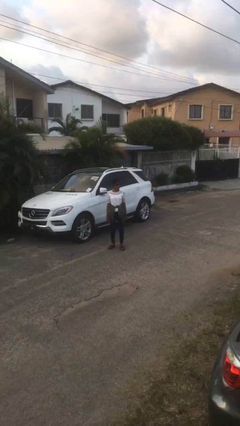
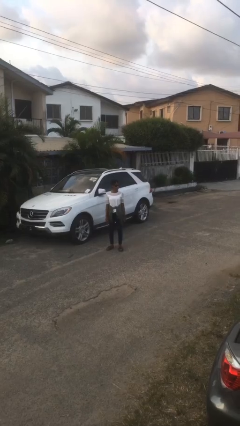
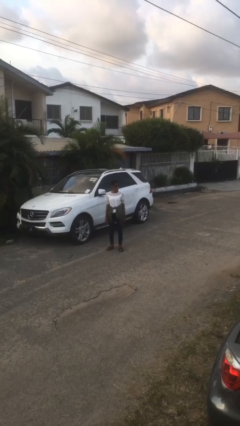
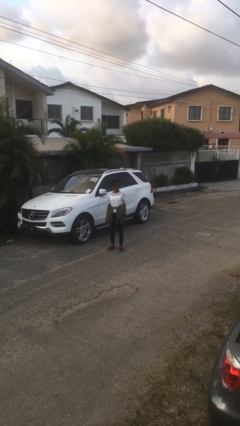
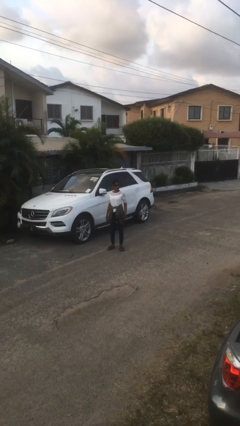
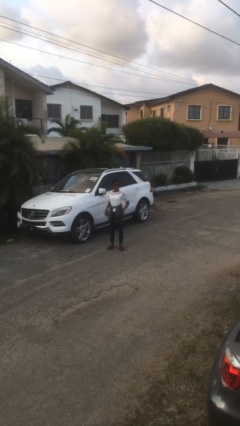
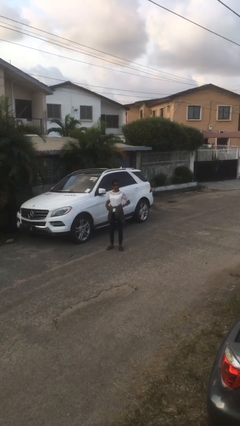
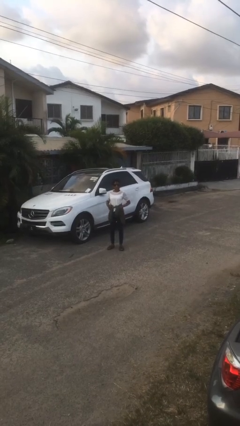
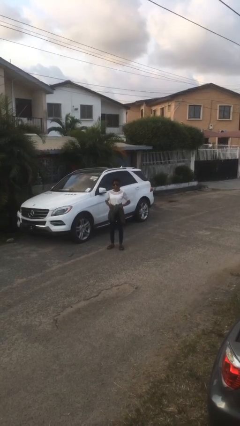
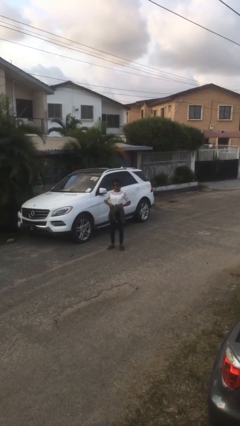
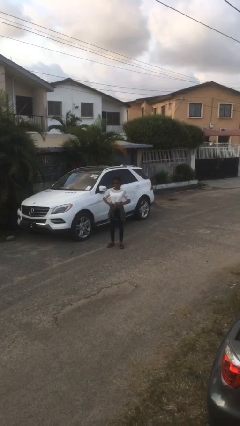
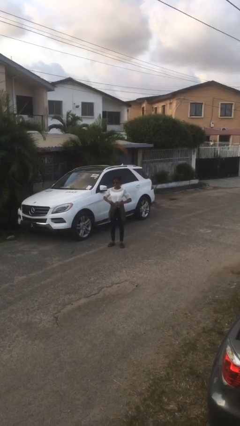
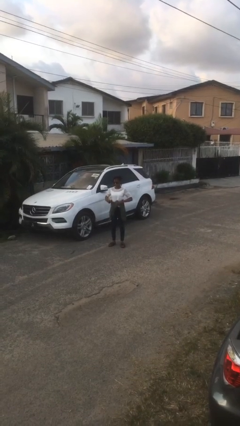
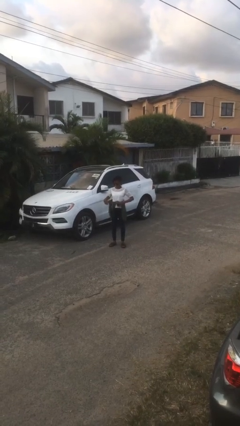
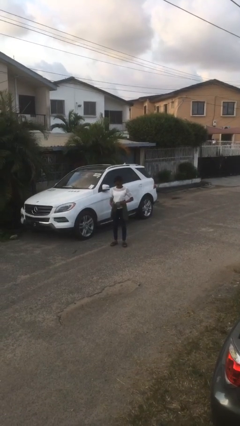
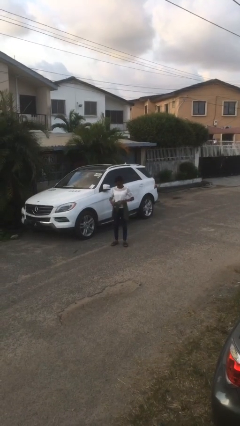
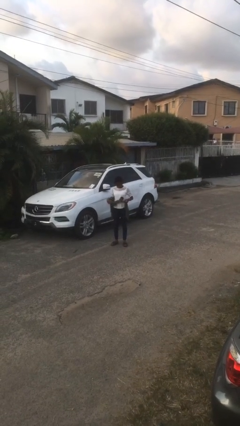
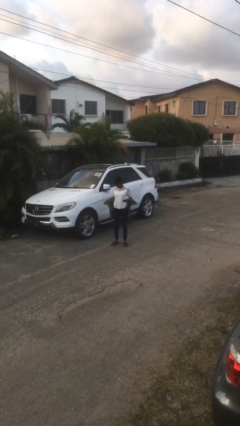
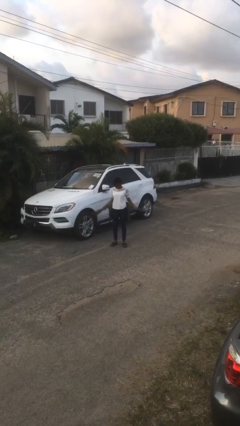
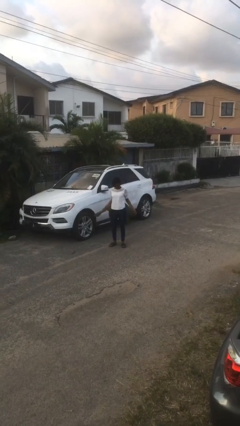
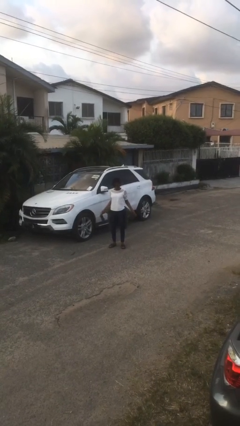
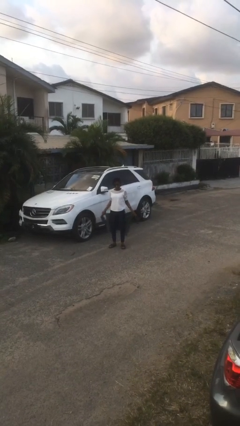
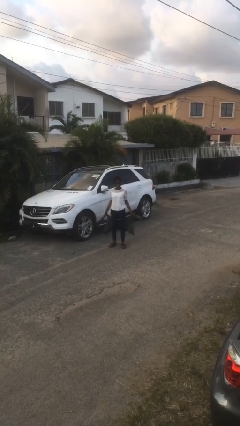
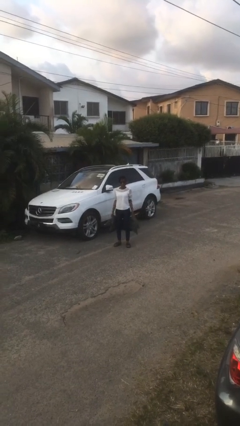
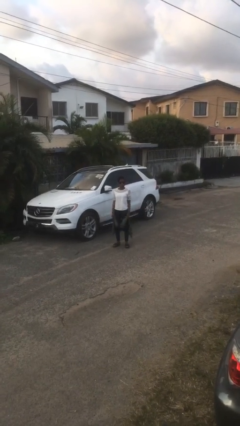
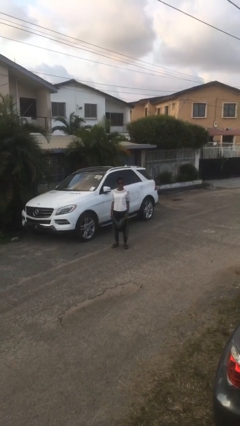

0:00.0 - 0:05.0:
person unties jacket around waist

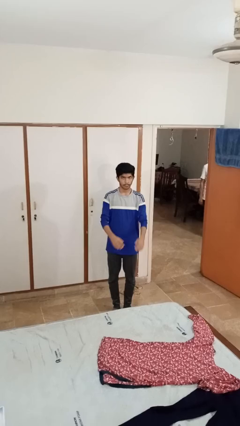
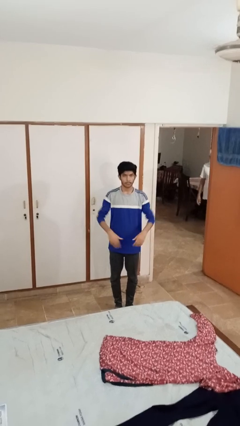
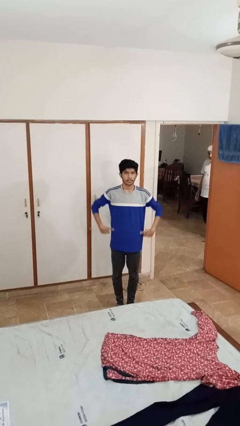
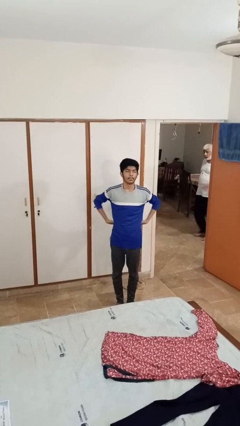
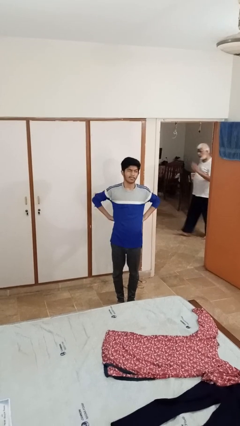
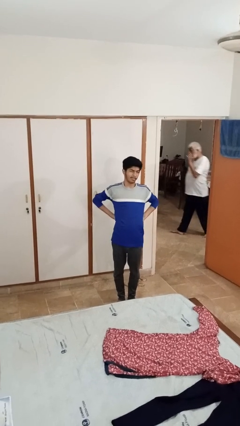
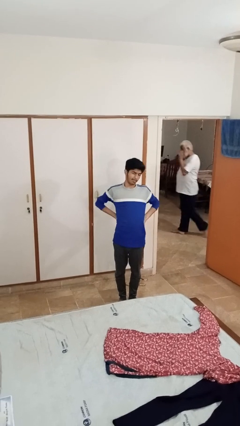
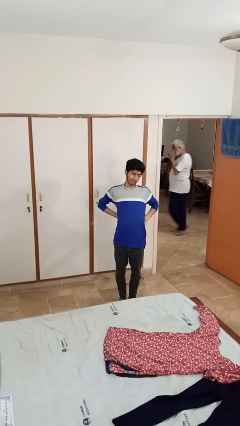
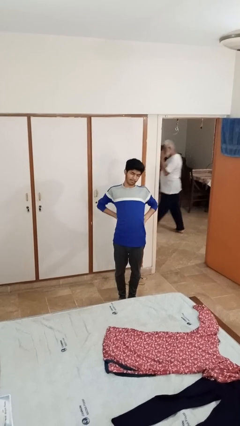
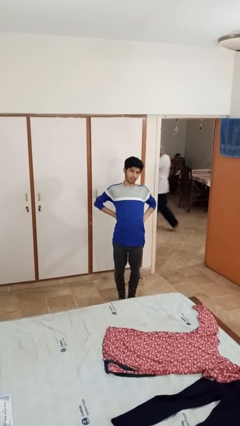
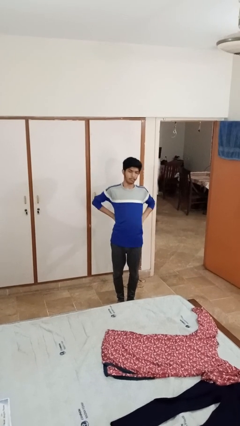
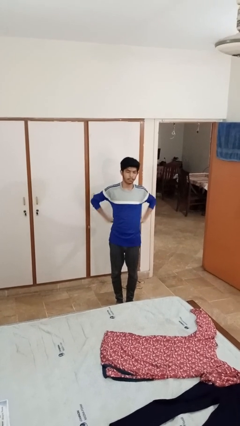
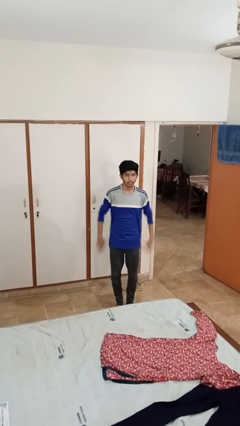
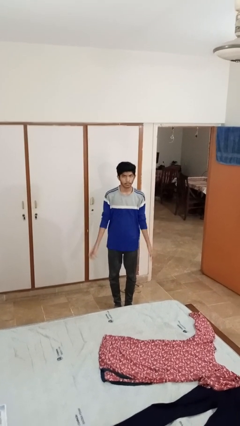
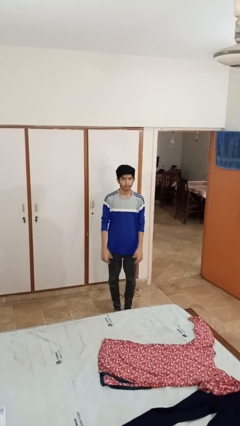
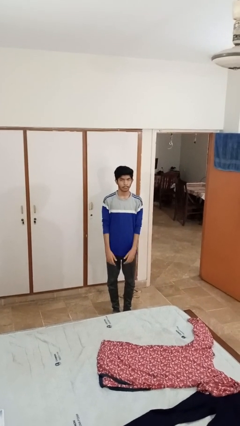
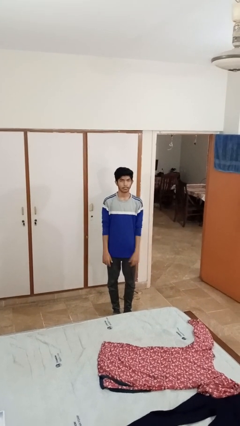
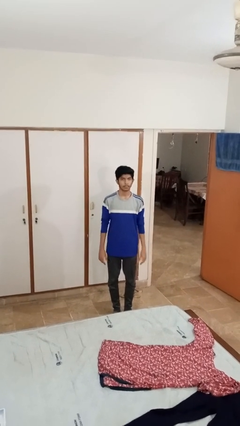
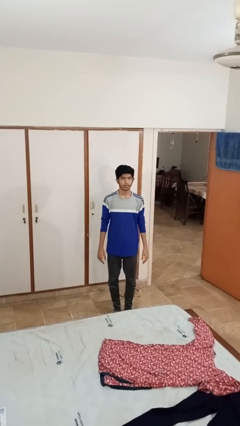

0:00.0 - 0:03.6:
person stretches back

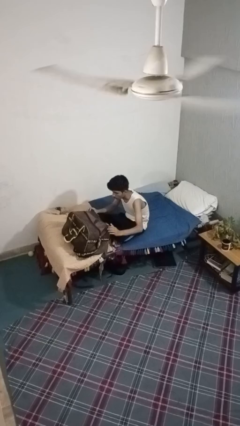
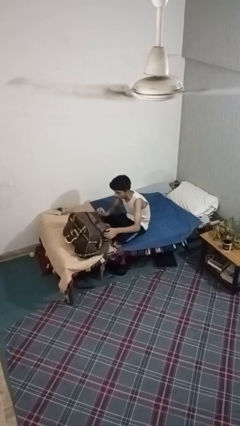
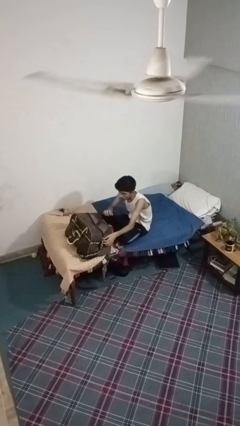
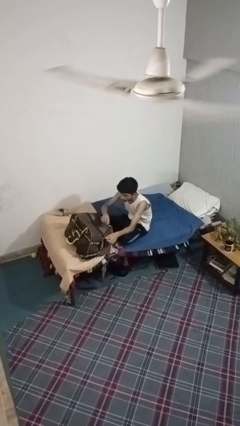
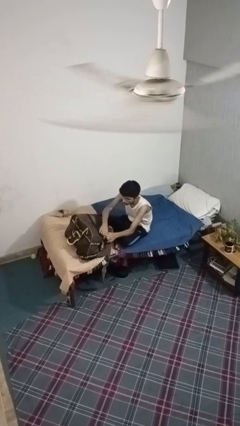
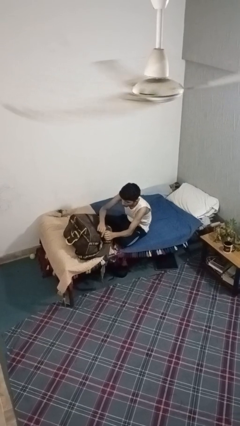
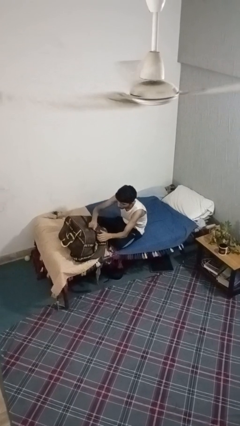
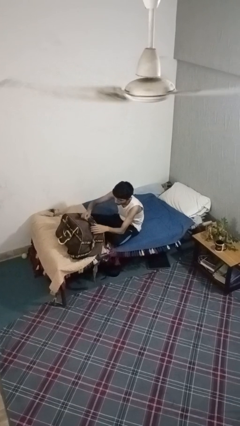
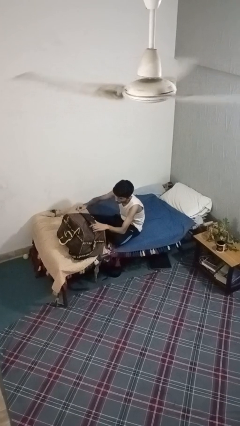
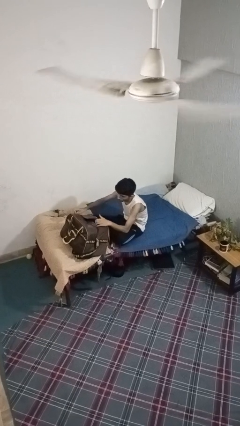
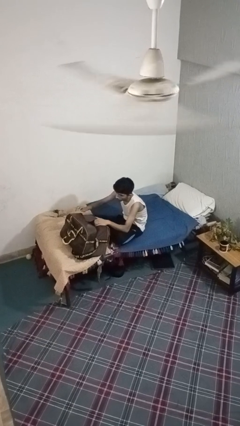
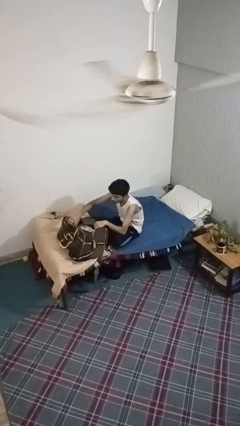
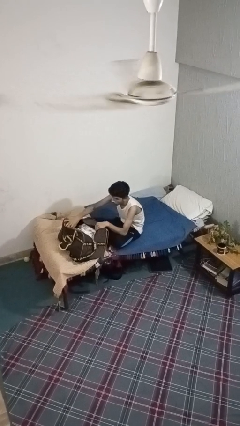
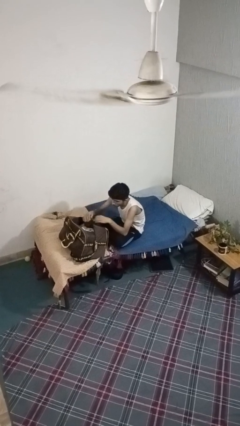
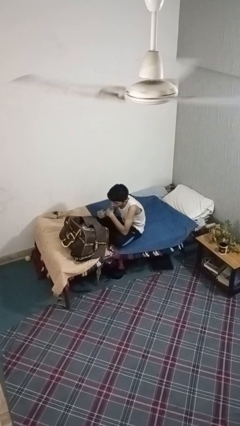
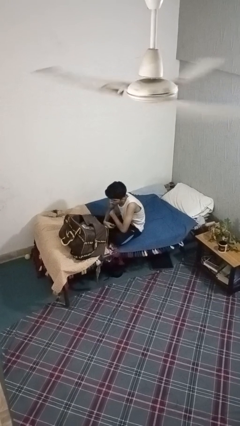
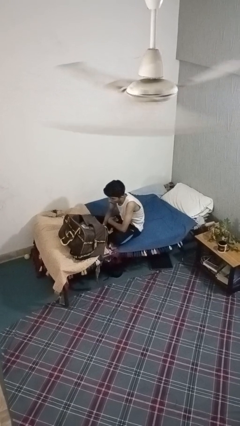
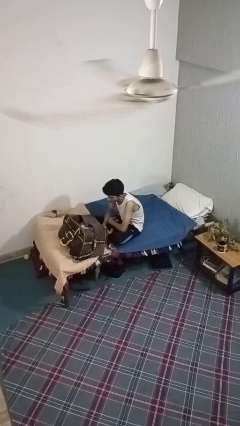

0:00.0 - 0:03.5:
person opens suitcase

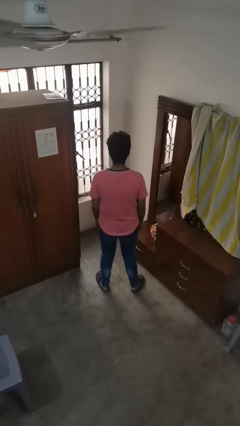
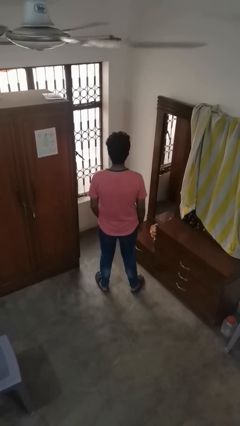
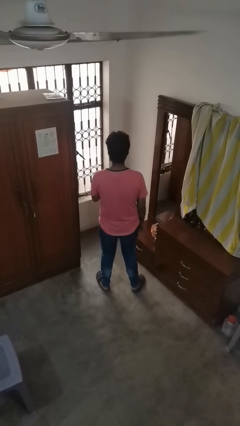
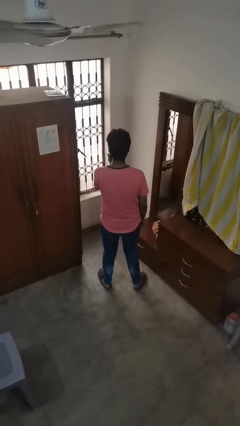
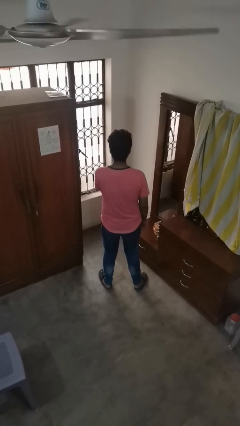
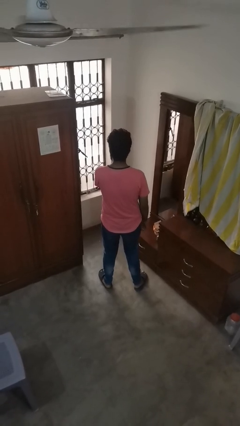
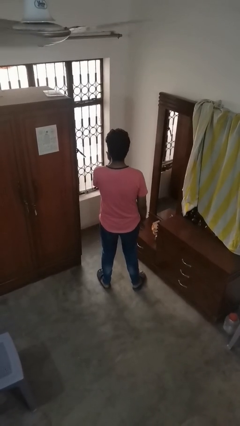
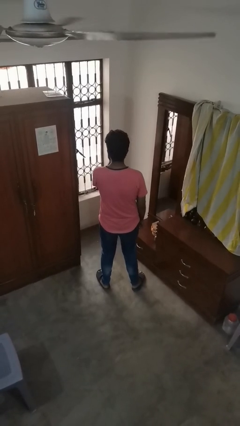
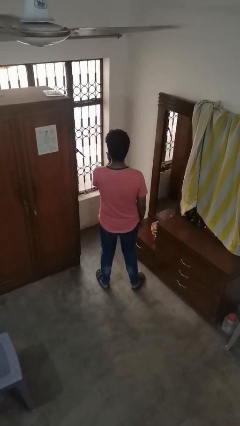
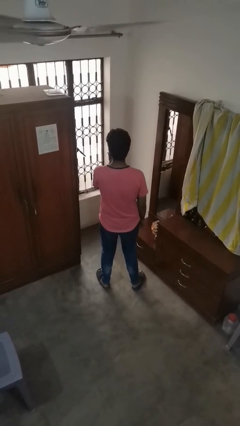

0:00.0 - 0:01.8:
person licks fingers

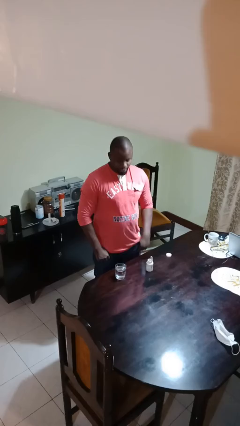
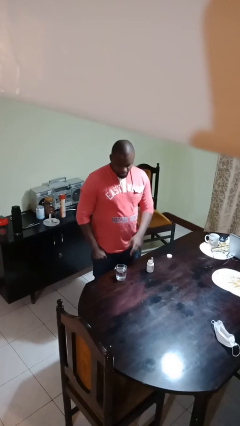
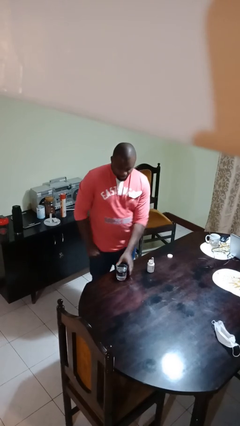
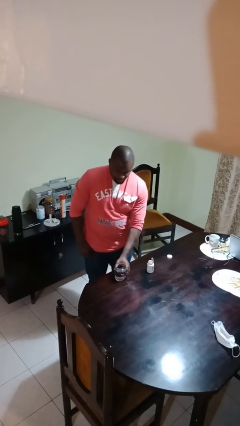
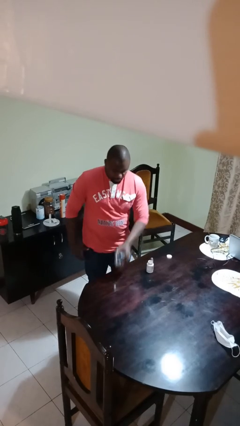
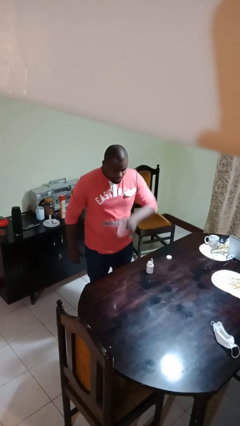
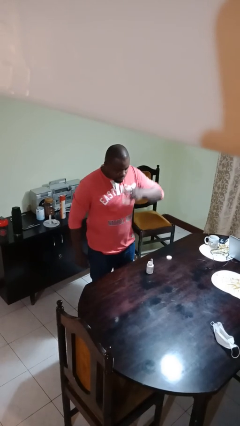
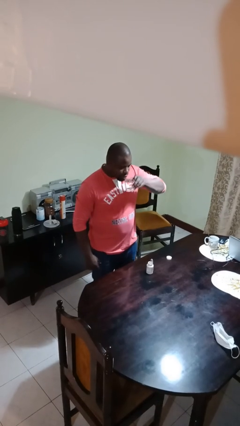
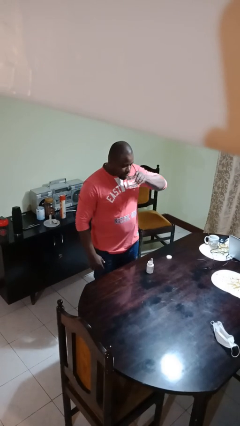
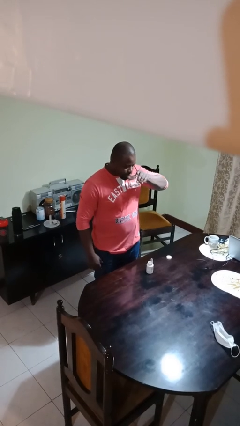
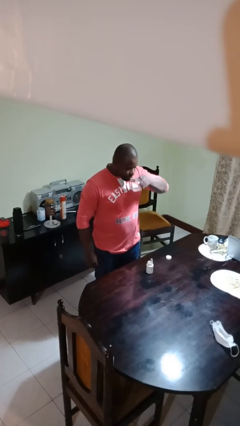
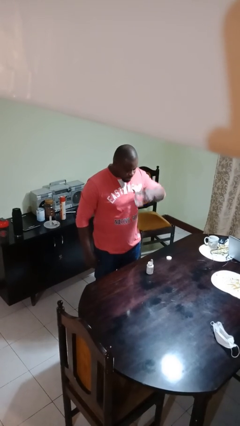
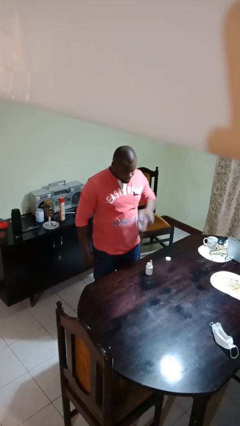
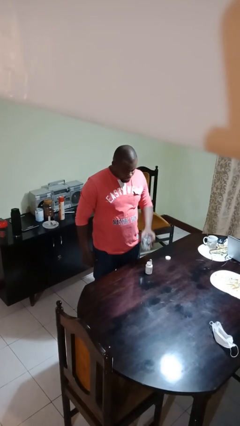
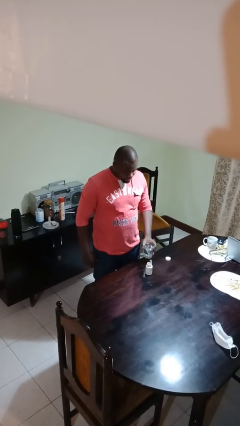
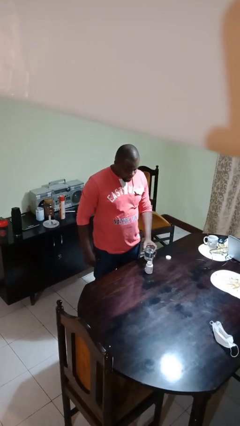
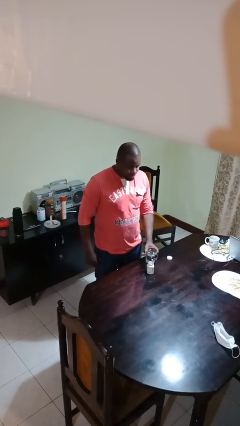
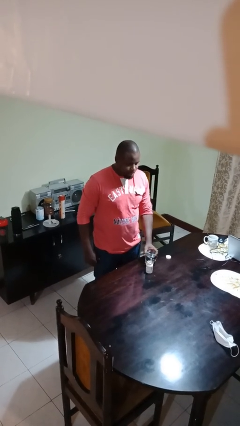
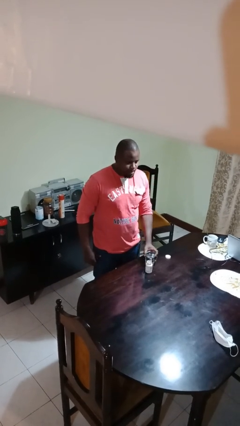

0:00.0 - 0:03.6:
person drinks from cup

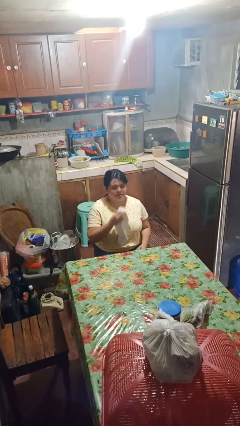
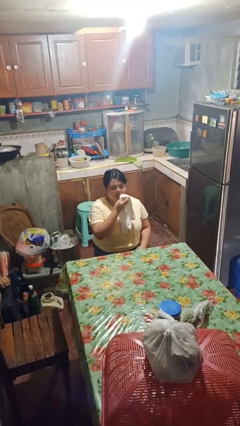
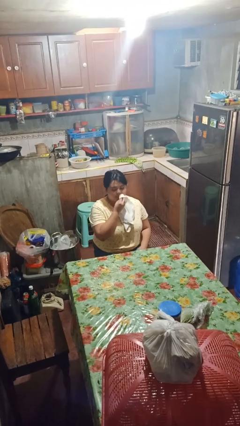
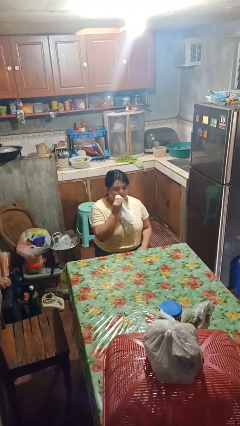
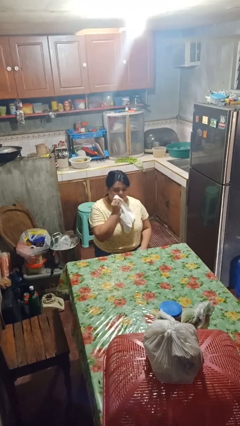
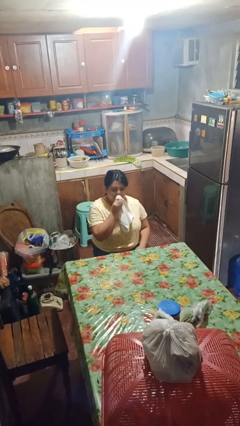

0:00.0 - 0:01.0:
person wipes mouth with napkin
